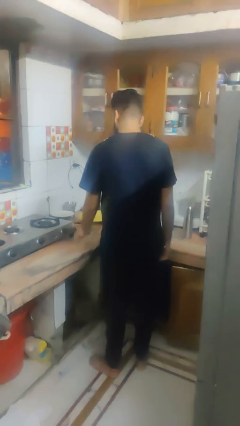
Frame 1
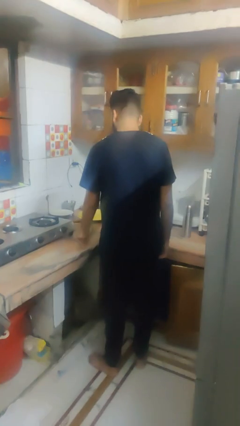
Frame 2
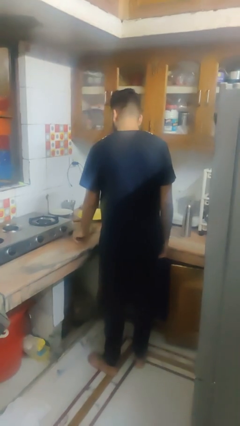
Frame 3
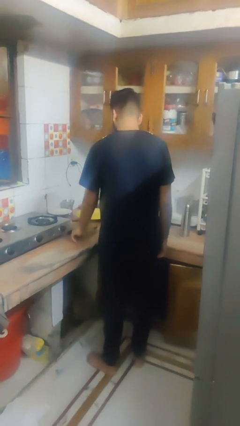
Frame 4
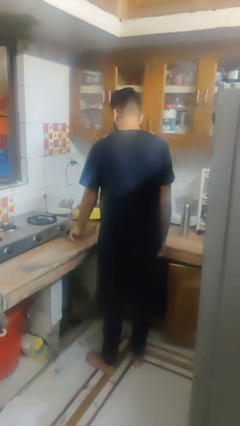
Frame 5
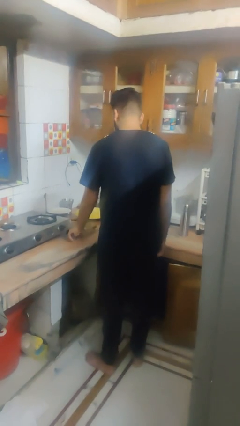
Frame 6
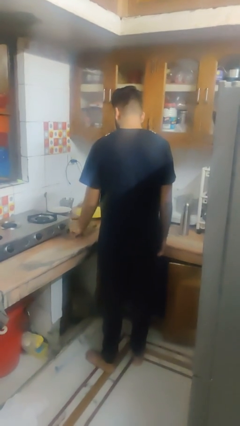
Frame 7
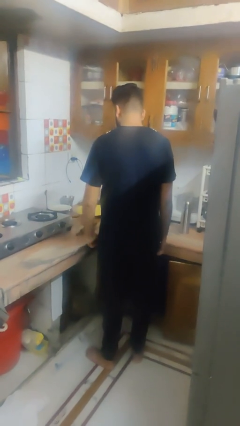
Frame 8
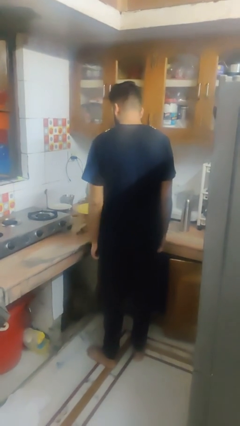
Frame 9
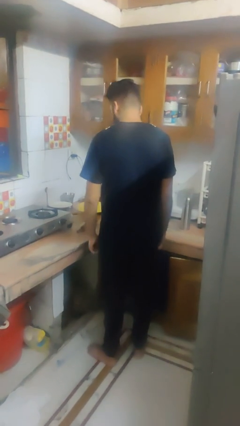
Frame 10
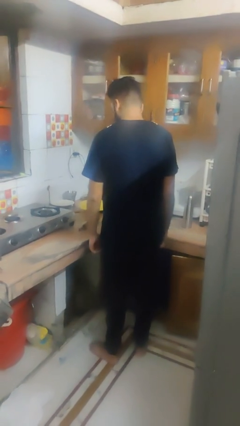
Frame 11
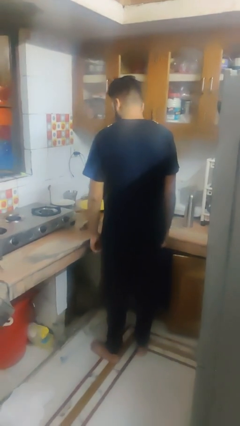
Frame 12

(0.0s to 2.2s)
person puts down object into cabinet

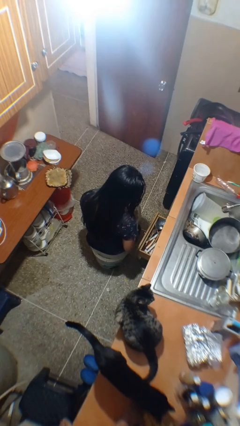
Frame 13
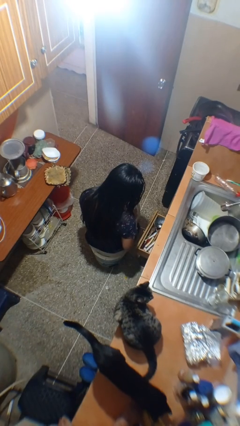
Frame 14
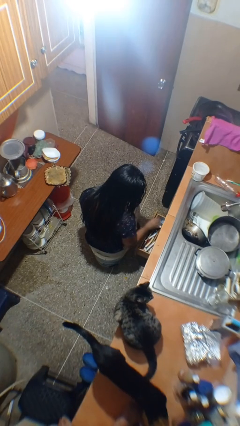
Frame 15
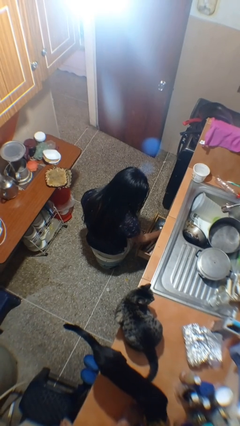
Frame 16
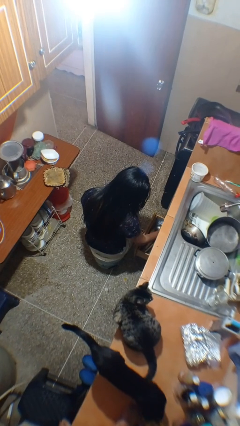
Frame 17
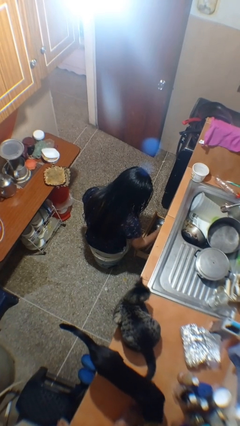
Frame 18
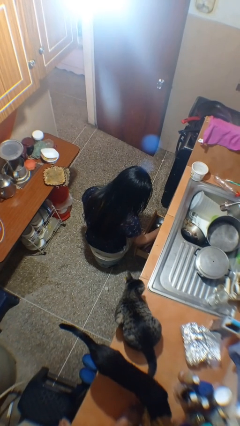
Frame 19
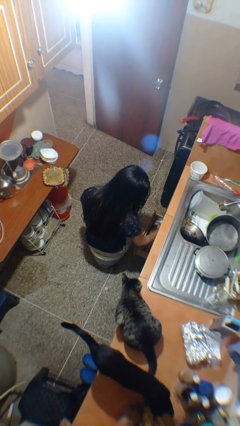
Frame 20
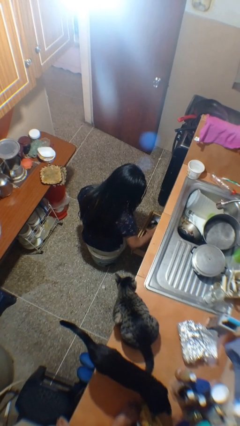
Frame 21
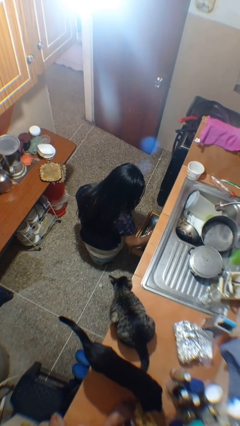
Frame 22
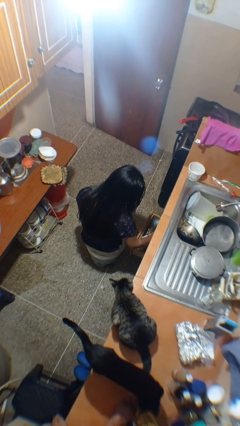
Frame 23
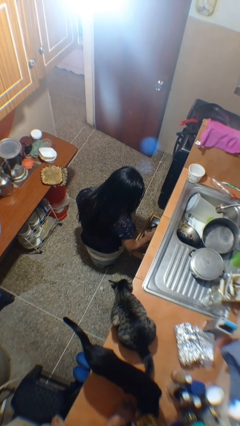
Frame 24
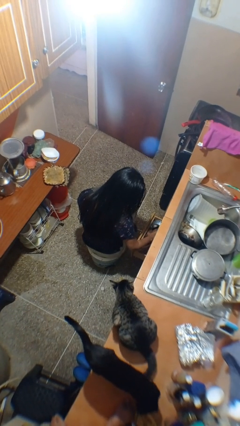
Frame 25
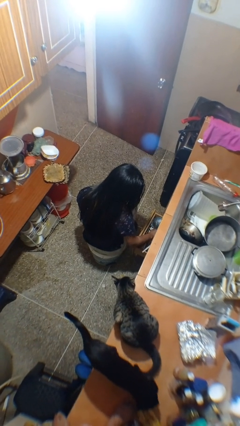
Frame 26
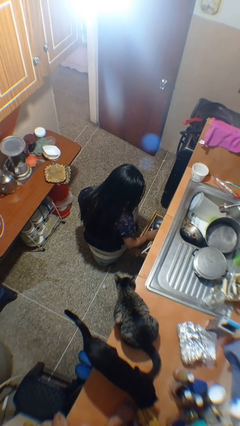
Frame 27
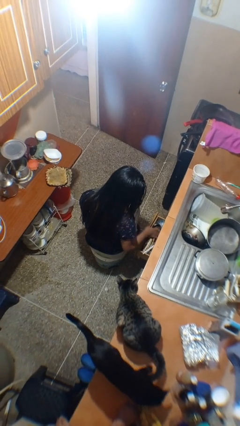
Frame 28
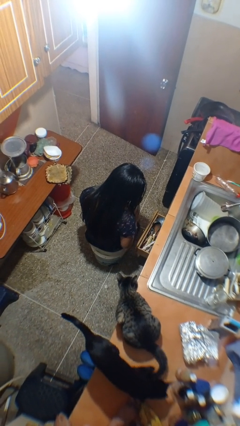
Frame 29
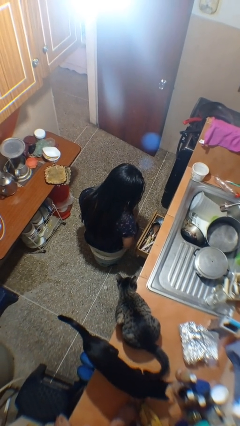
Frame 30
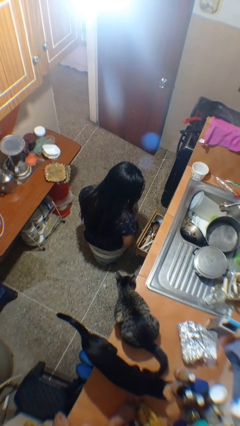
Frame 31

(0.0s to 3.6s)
person searches in kitchen drawer

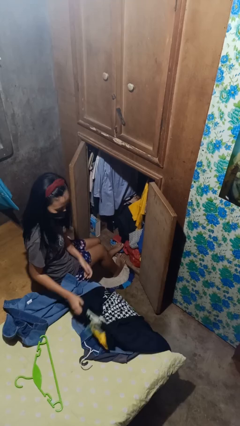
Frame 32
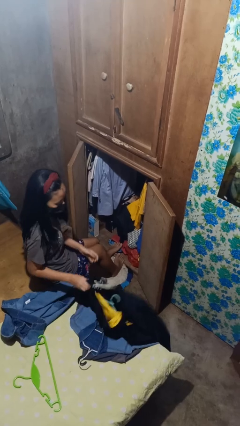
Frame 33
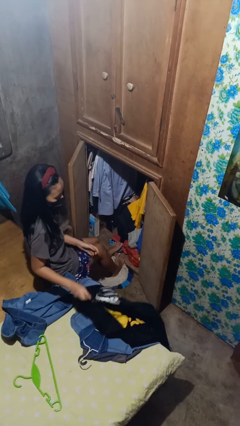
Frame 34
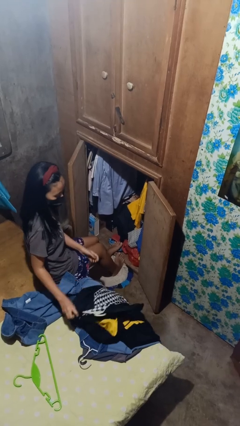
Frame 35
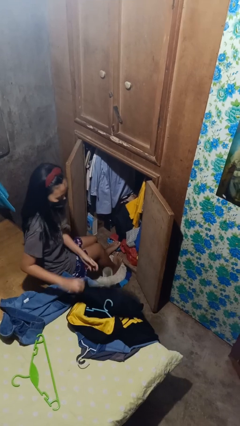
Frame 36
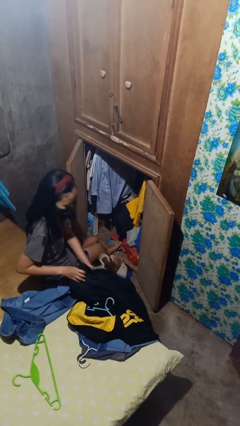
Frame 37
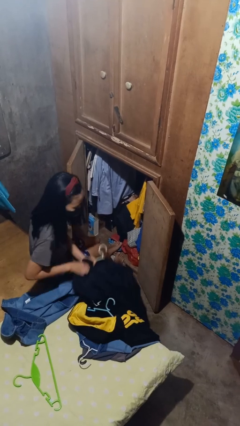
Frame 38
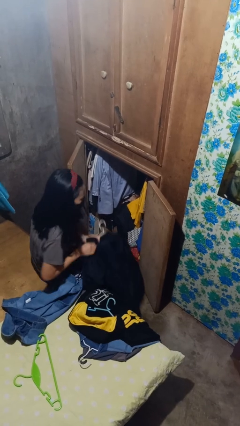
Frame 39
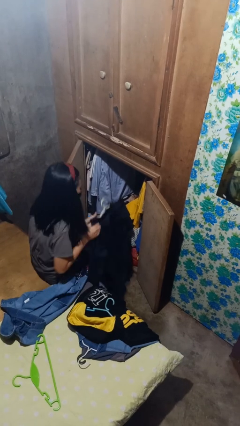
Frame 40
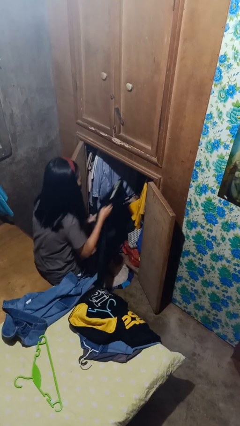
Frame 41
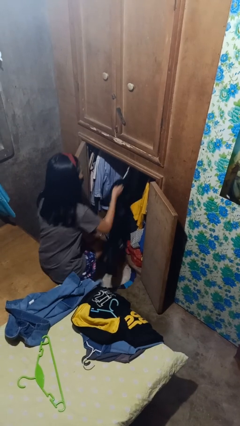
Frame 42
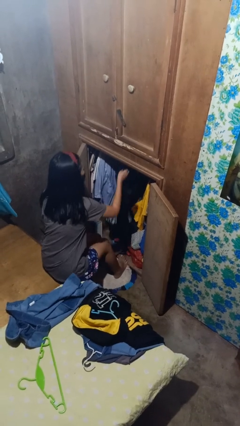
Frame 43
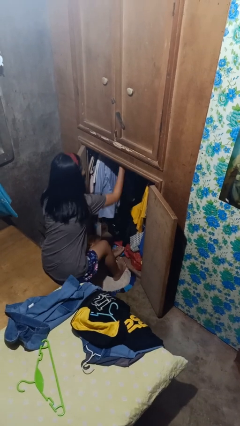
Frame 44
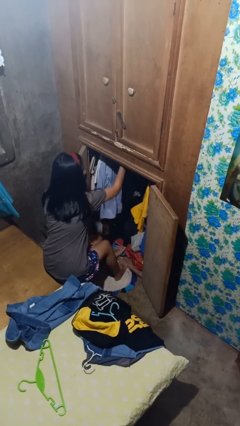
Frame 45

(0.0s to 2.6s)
person puts clothes into closet

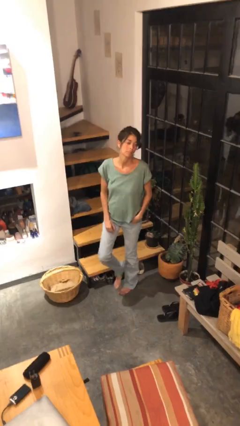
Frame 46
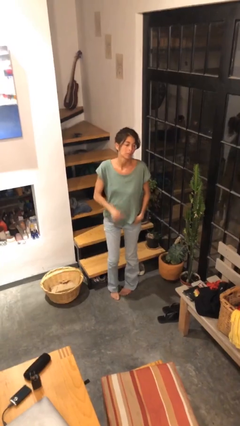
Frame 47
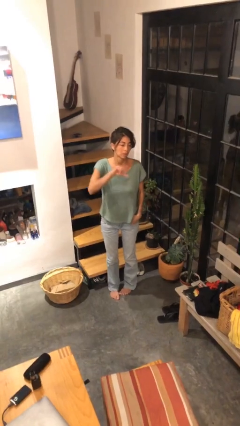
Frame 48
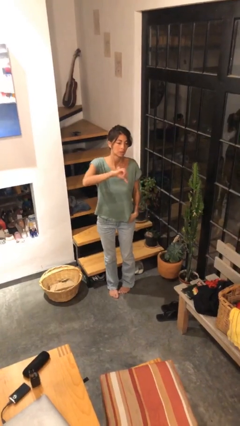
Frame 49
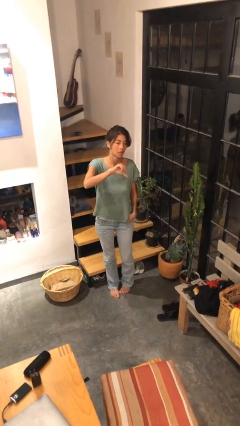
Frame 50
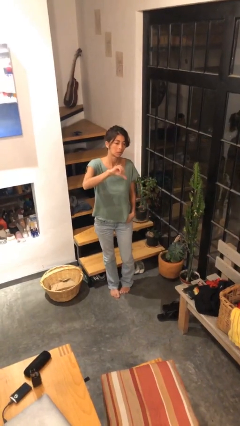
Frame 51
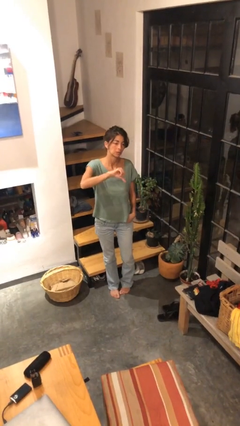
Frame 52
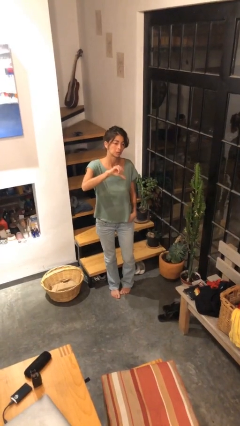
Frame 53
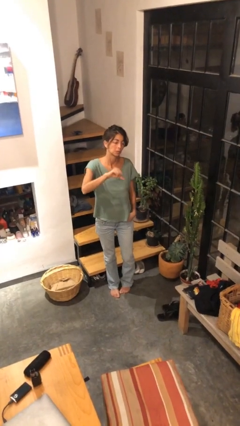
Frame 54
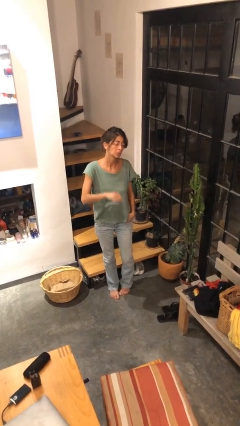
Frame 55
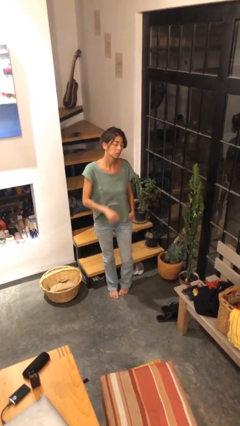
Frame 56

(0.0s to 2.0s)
person gestures thumbs down

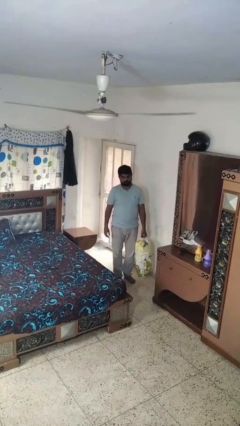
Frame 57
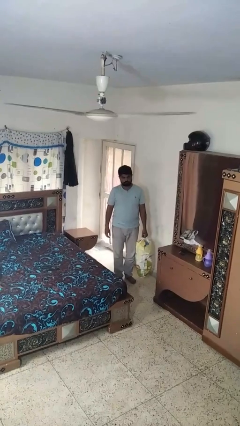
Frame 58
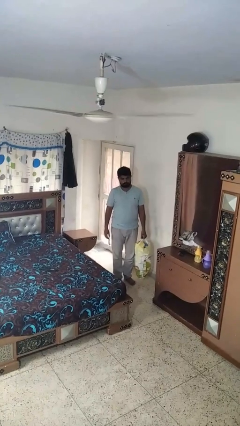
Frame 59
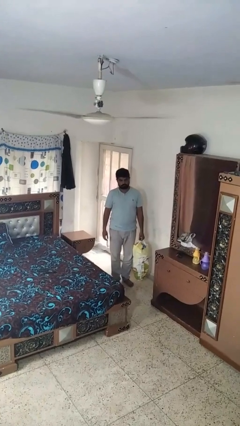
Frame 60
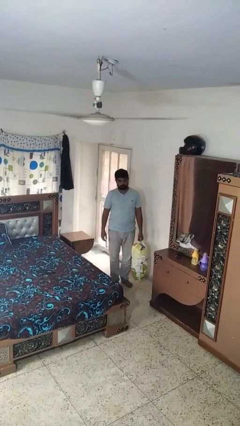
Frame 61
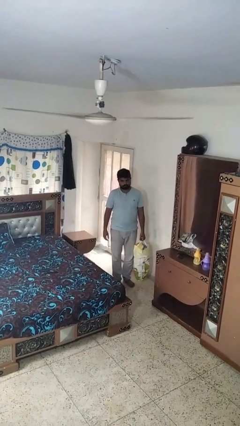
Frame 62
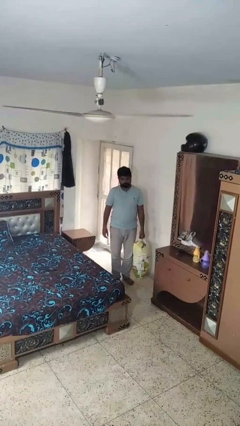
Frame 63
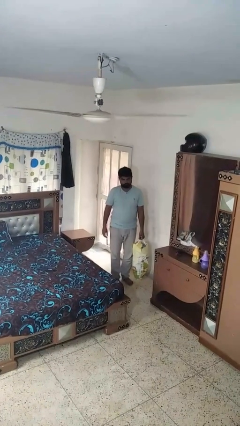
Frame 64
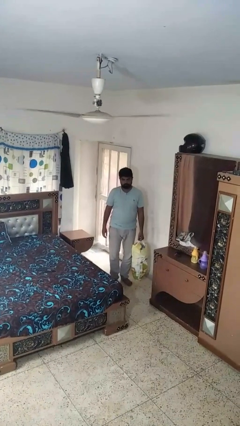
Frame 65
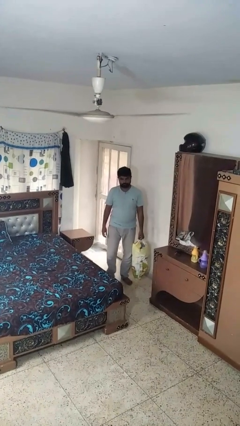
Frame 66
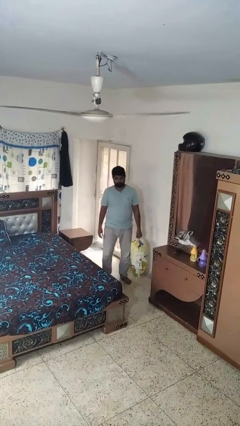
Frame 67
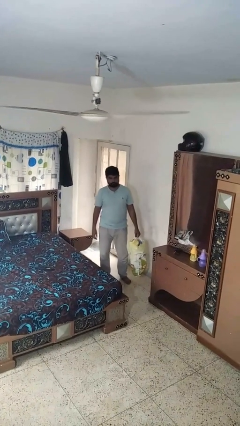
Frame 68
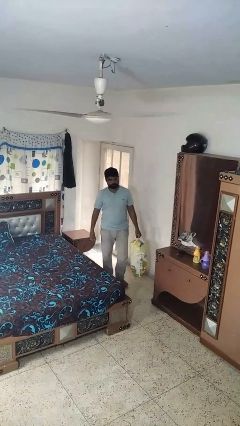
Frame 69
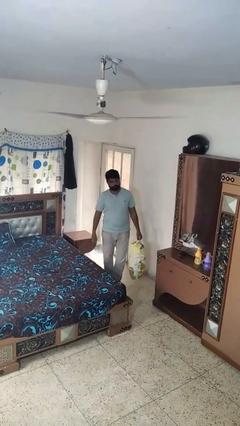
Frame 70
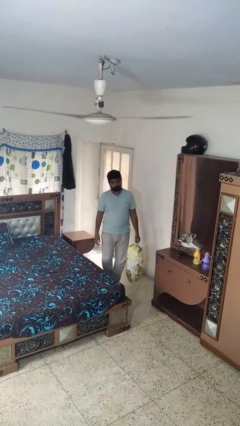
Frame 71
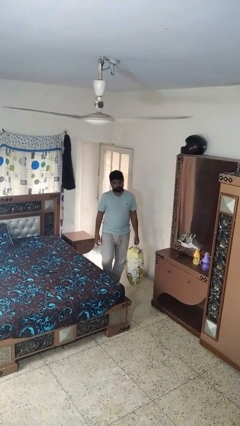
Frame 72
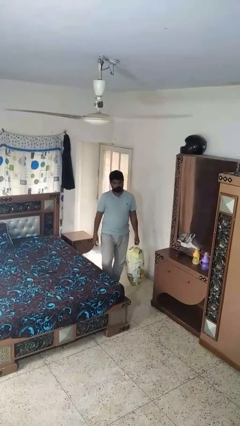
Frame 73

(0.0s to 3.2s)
person carries groceries

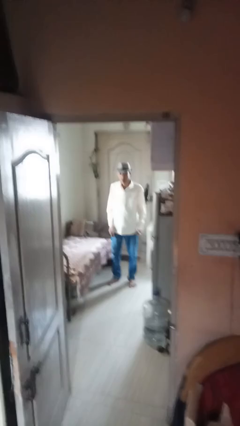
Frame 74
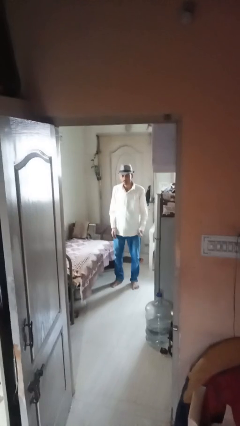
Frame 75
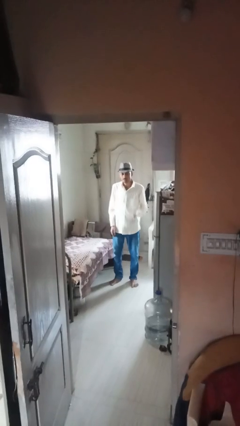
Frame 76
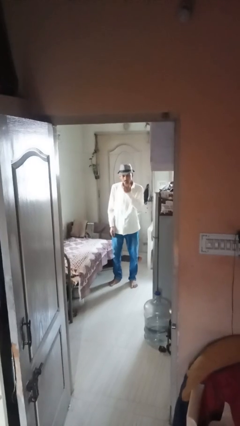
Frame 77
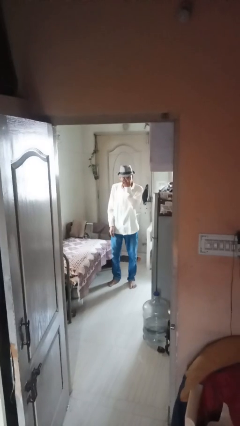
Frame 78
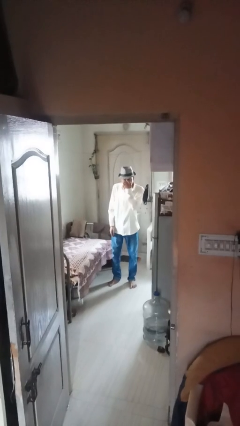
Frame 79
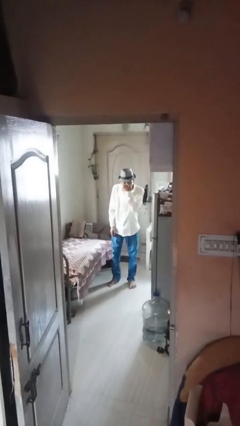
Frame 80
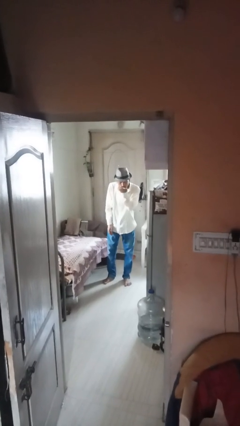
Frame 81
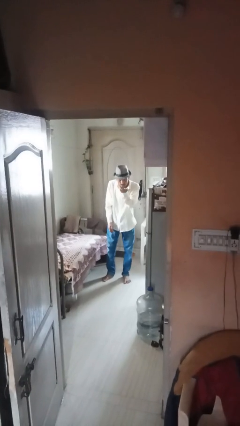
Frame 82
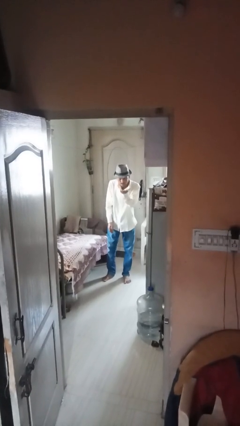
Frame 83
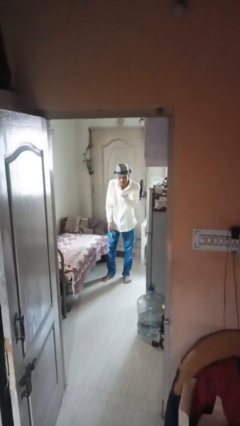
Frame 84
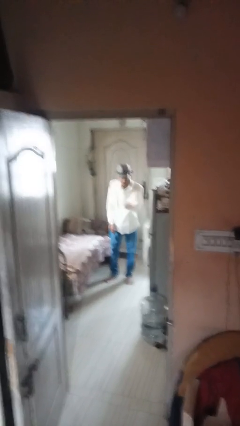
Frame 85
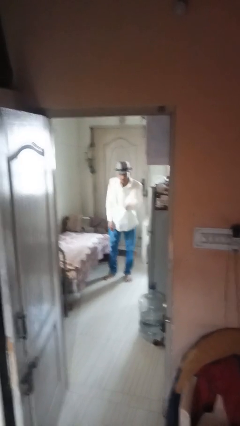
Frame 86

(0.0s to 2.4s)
person gestures blow kiss

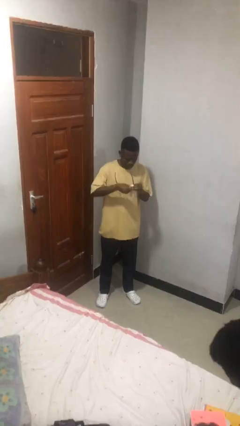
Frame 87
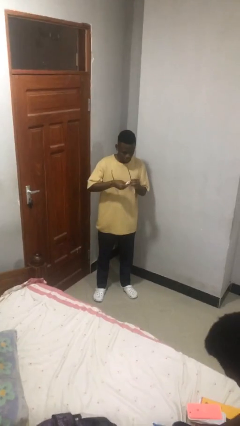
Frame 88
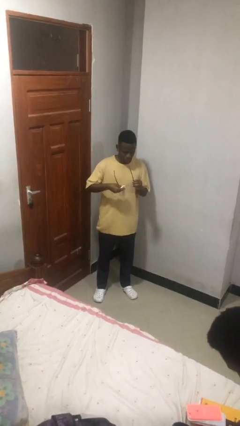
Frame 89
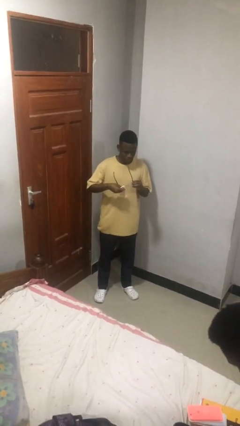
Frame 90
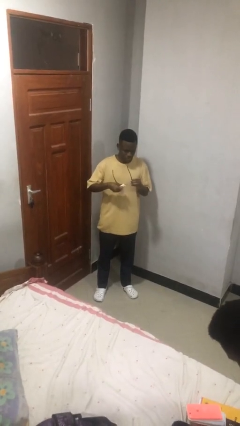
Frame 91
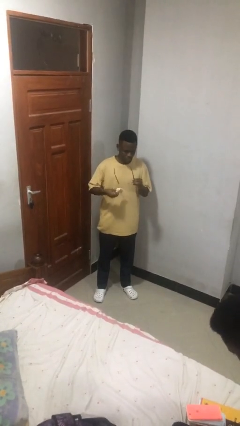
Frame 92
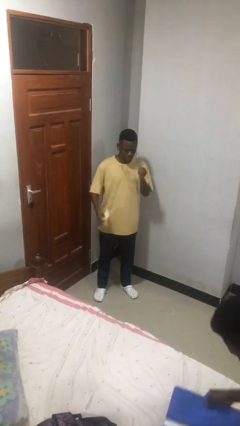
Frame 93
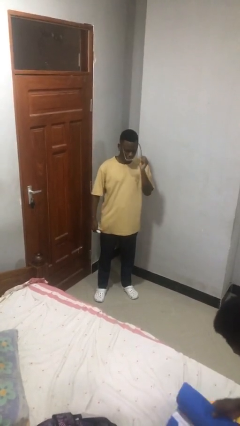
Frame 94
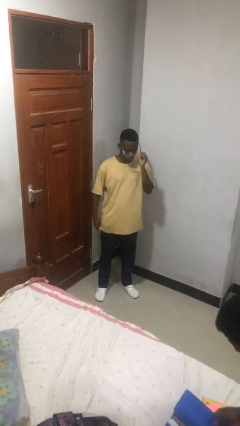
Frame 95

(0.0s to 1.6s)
person cleans eyeglasses
